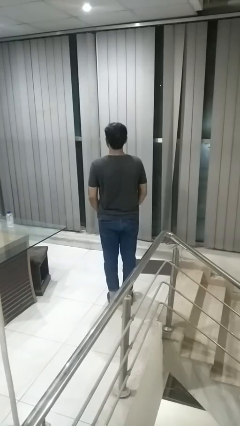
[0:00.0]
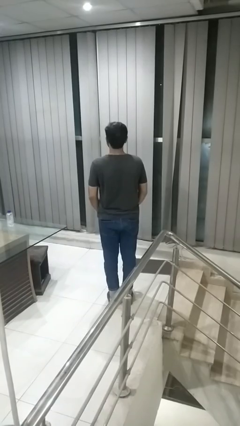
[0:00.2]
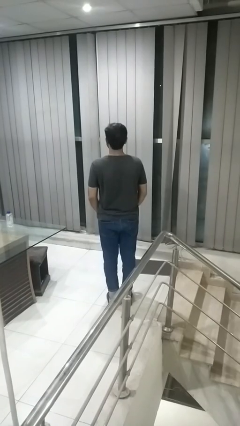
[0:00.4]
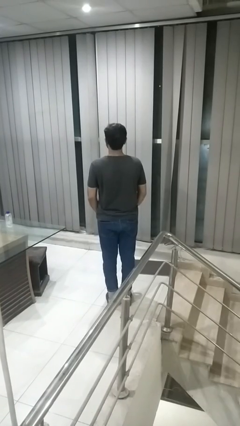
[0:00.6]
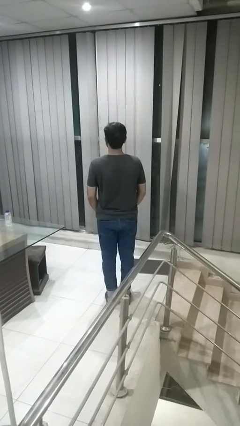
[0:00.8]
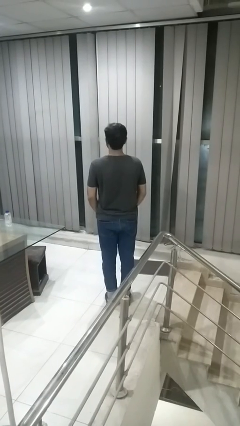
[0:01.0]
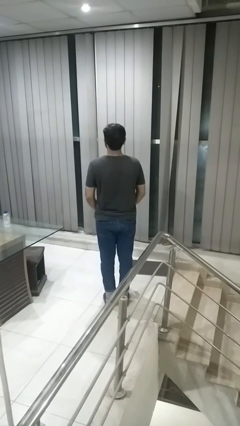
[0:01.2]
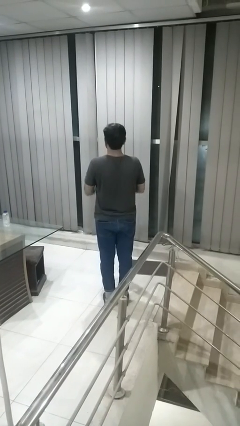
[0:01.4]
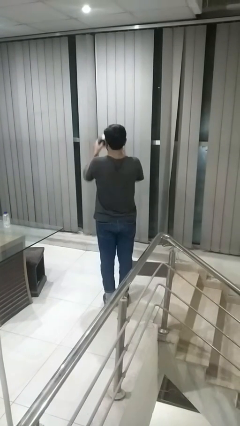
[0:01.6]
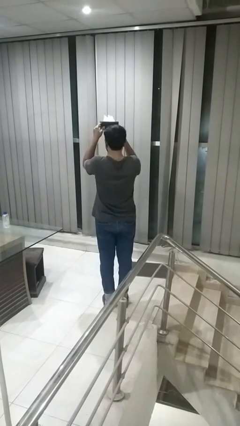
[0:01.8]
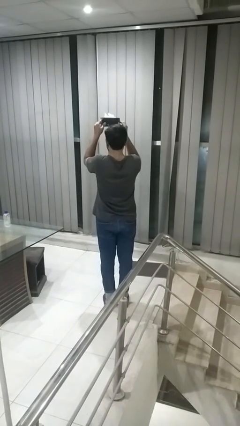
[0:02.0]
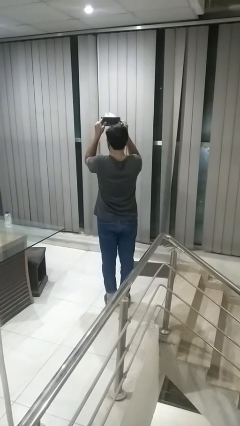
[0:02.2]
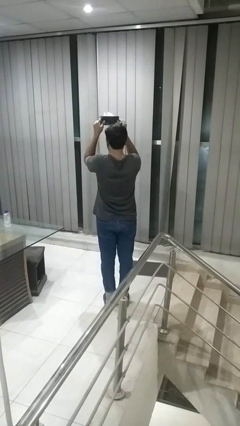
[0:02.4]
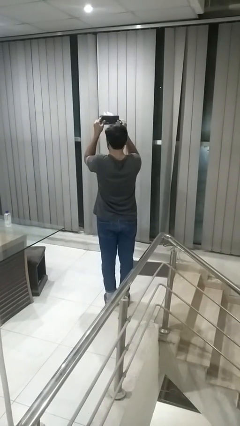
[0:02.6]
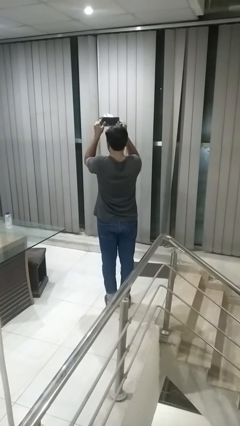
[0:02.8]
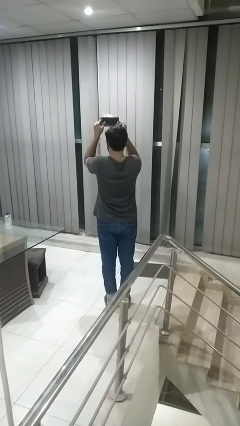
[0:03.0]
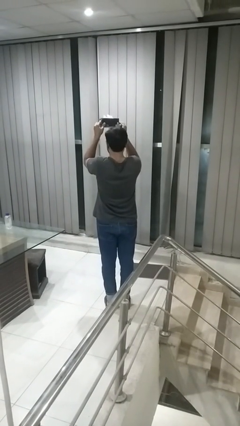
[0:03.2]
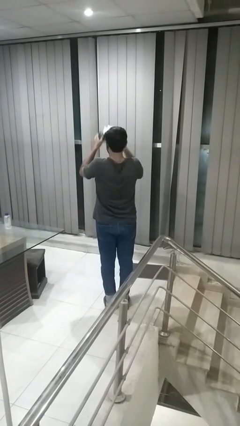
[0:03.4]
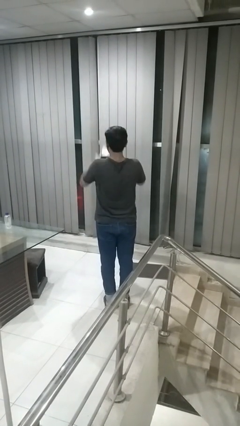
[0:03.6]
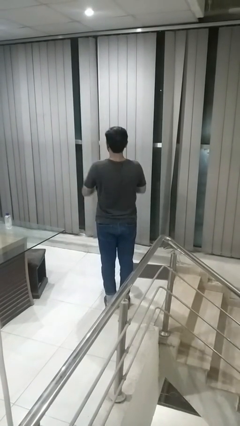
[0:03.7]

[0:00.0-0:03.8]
person holds object above head

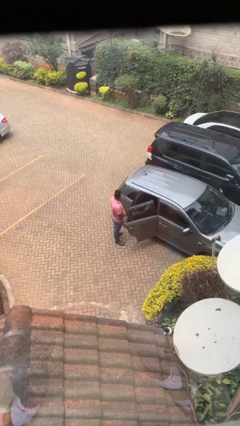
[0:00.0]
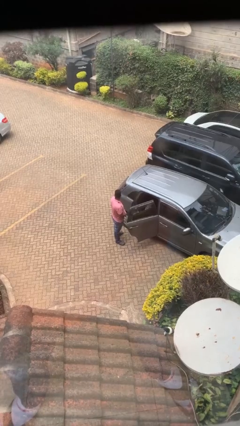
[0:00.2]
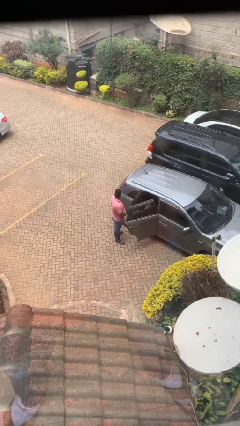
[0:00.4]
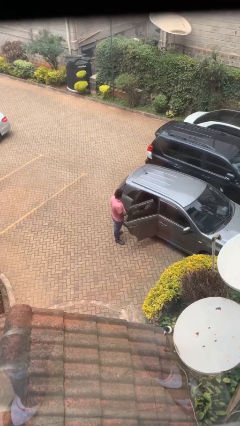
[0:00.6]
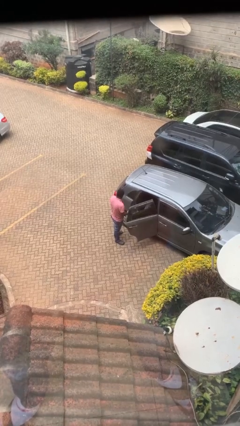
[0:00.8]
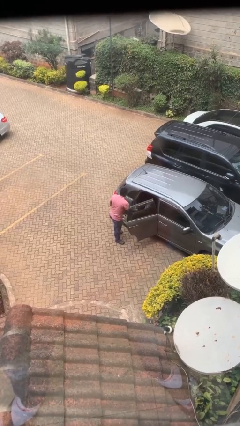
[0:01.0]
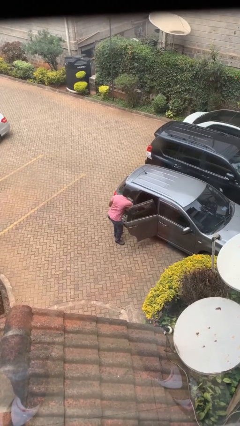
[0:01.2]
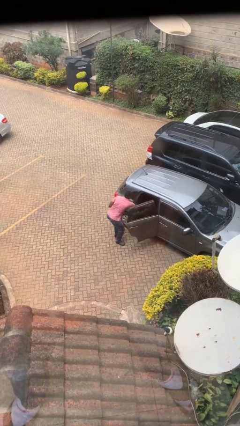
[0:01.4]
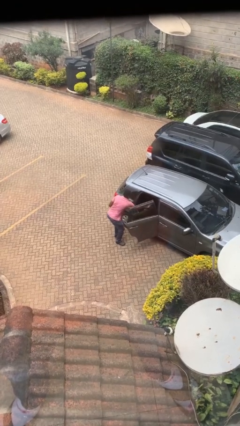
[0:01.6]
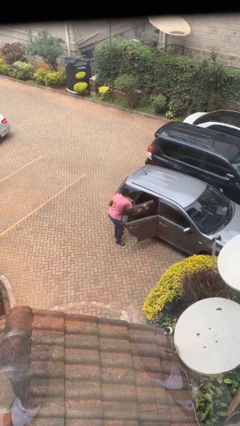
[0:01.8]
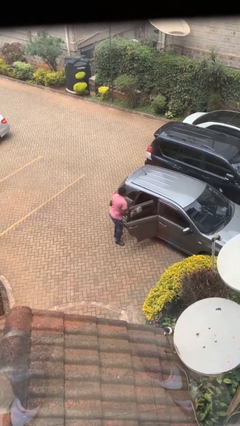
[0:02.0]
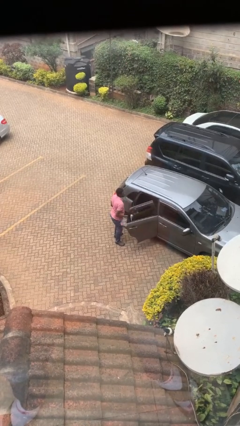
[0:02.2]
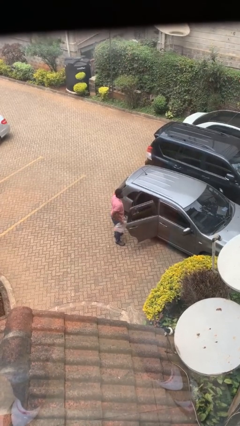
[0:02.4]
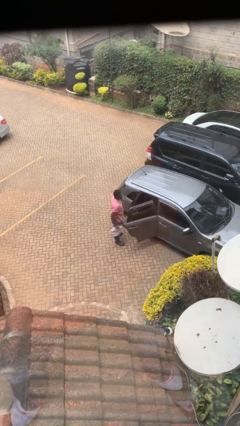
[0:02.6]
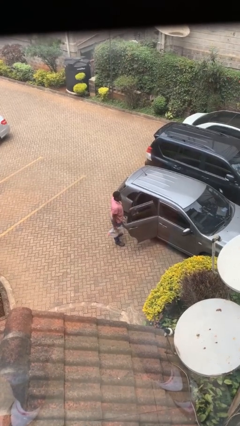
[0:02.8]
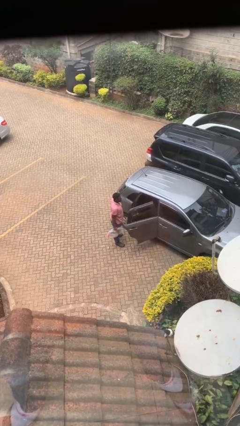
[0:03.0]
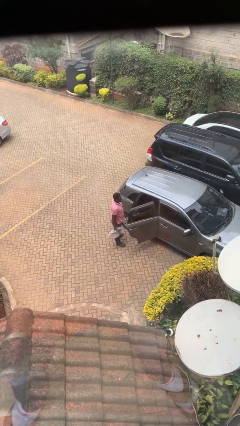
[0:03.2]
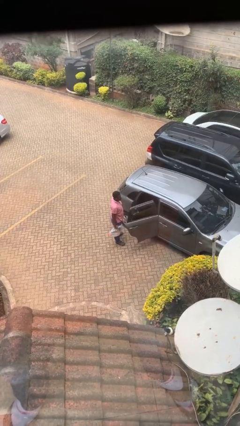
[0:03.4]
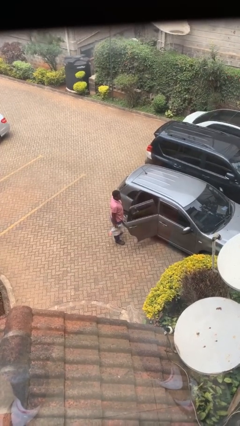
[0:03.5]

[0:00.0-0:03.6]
person unloads car

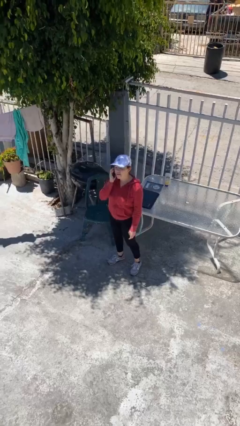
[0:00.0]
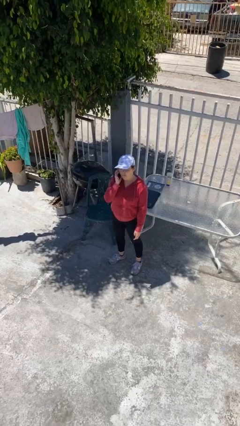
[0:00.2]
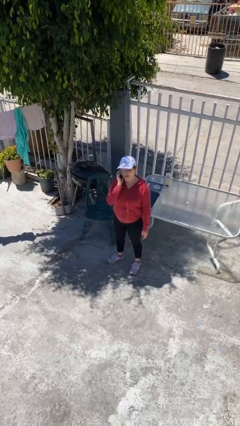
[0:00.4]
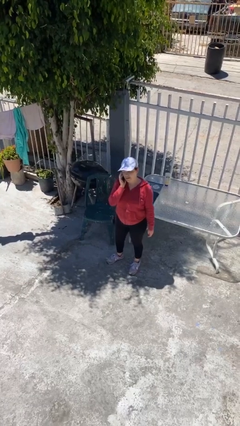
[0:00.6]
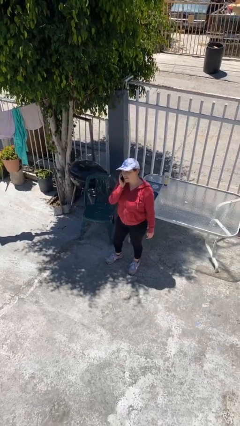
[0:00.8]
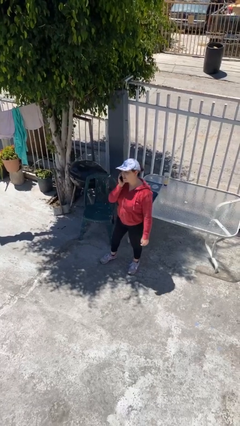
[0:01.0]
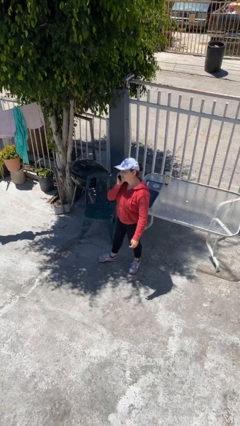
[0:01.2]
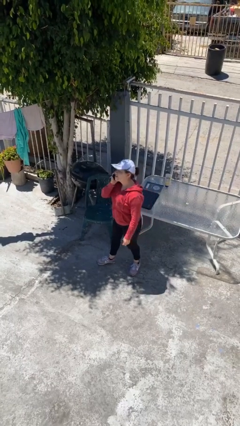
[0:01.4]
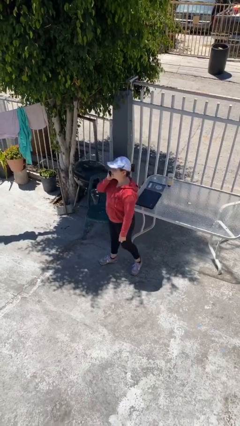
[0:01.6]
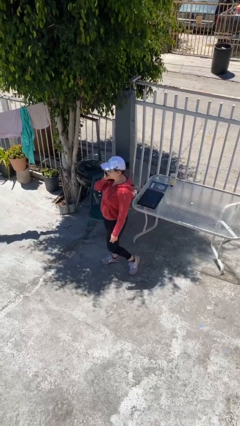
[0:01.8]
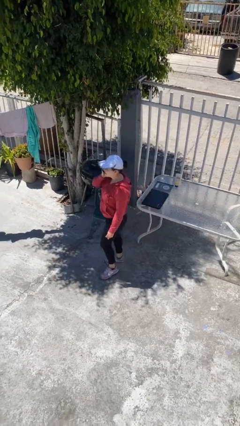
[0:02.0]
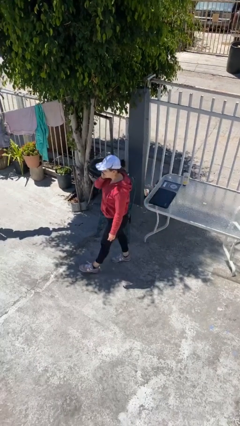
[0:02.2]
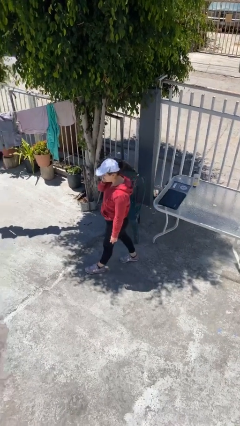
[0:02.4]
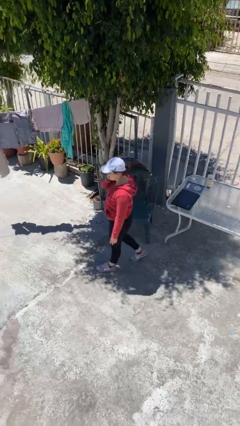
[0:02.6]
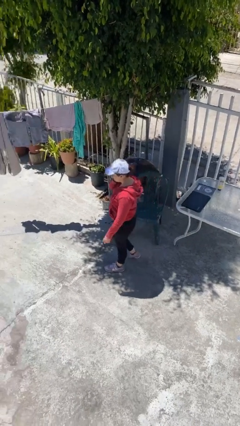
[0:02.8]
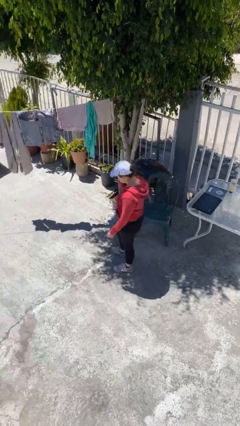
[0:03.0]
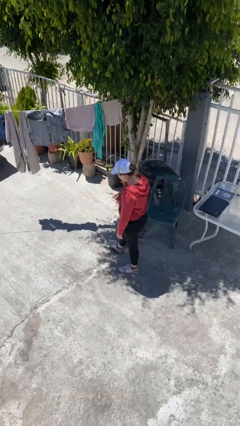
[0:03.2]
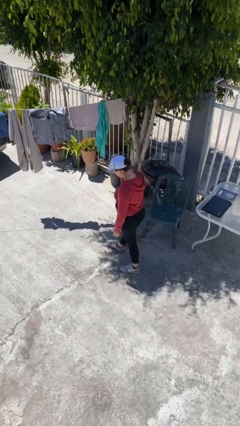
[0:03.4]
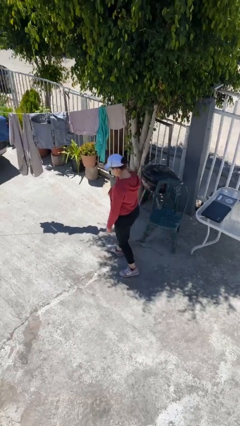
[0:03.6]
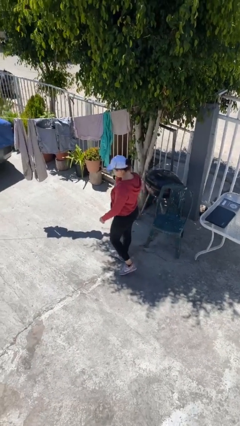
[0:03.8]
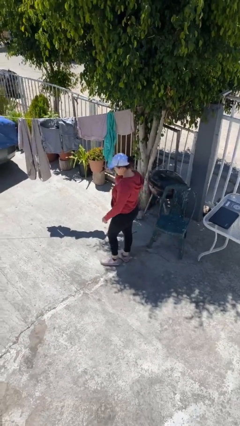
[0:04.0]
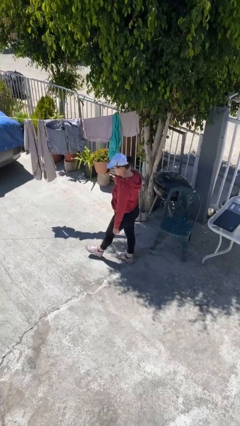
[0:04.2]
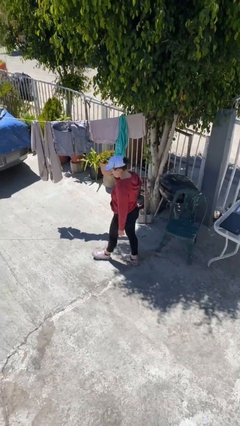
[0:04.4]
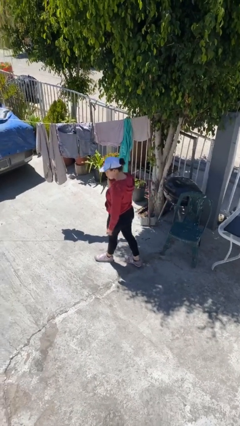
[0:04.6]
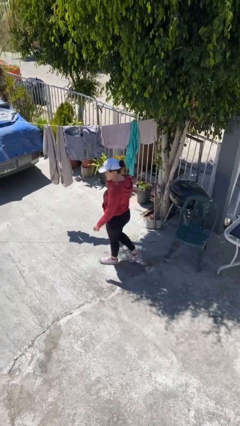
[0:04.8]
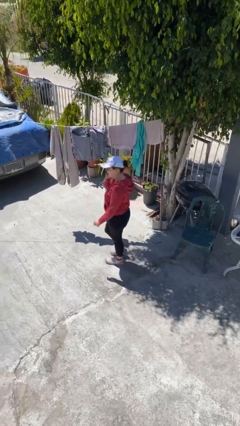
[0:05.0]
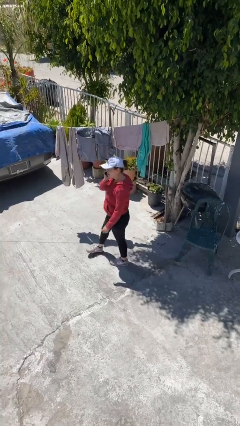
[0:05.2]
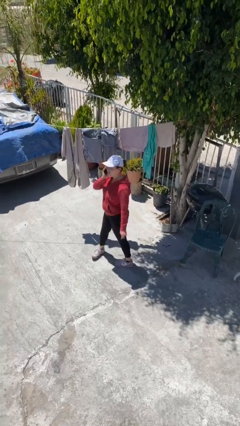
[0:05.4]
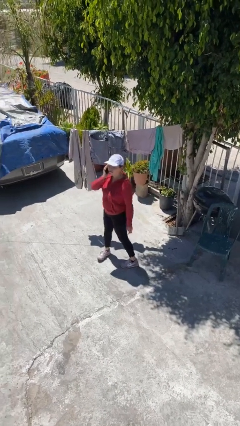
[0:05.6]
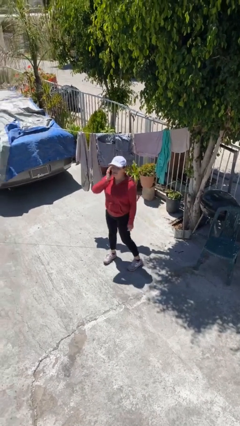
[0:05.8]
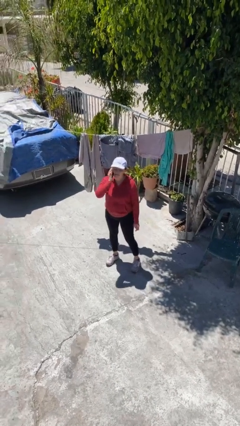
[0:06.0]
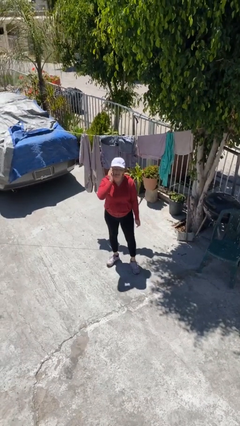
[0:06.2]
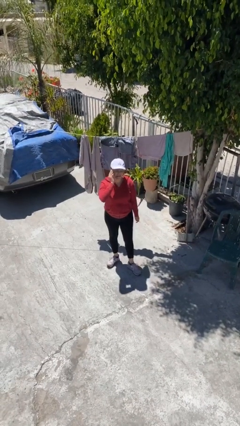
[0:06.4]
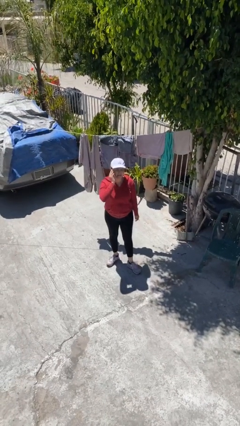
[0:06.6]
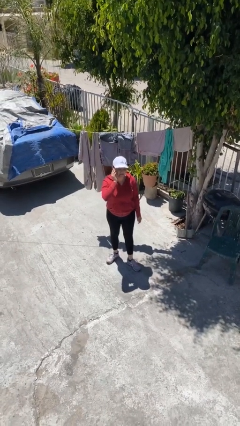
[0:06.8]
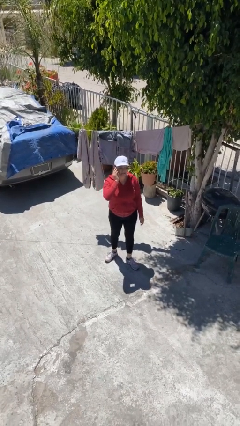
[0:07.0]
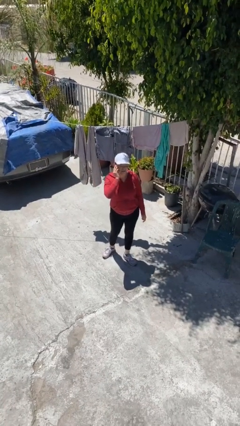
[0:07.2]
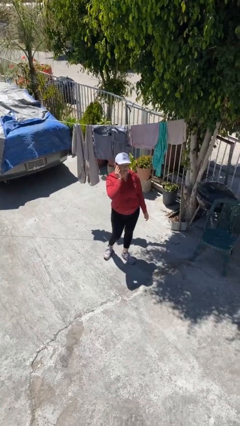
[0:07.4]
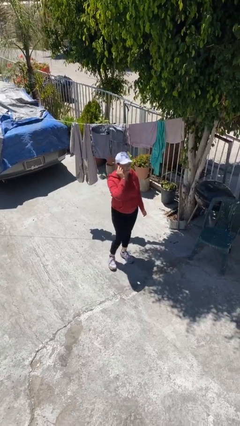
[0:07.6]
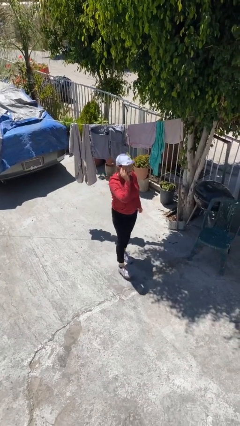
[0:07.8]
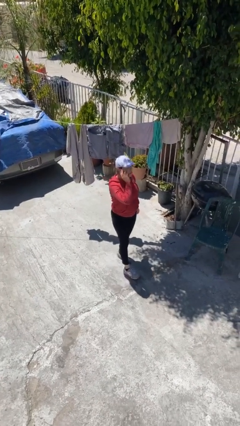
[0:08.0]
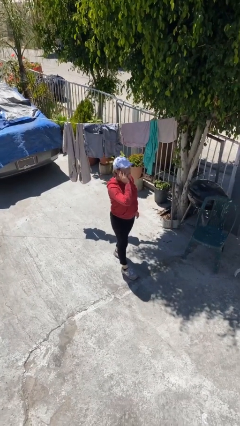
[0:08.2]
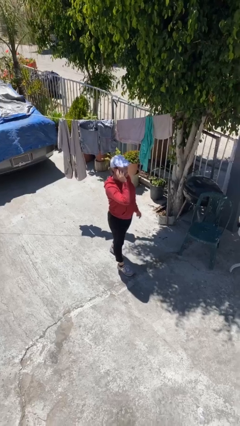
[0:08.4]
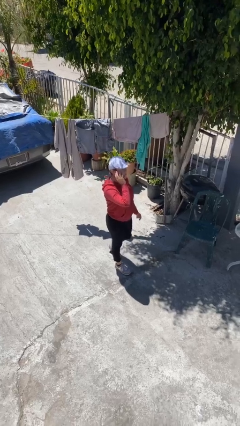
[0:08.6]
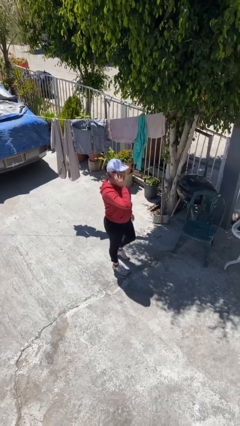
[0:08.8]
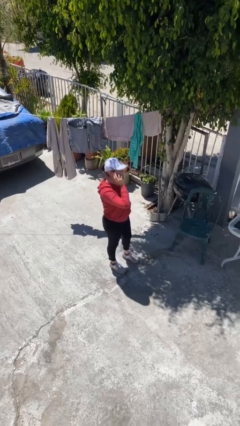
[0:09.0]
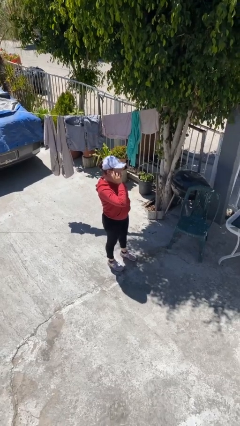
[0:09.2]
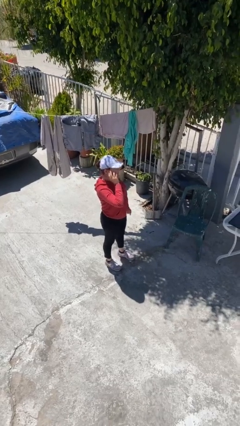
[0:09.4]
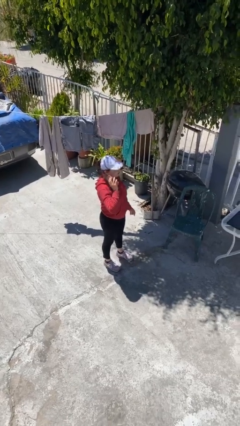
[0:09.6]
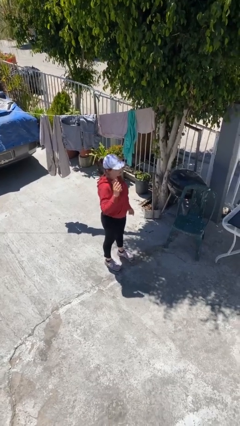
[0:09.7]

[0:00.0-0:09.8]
person talks on phone

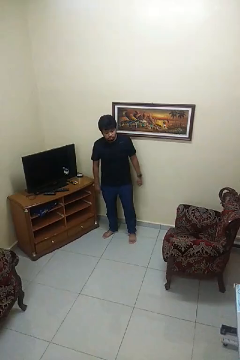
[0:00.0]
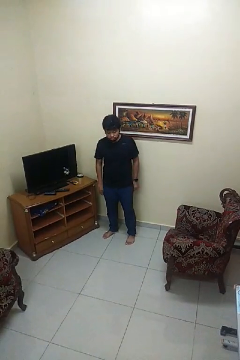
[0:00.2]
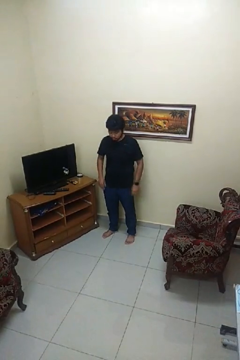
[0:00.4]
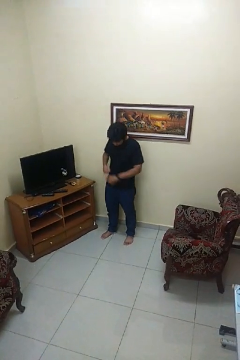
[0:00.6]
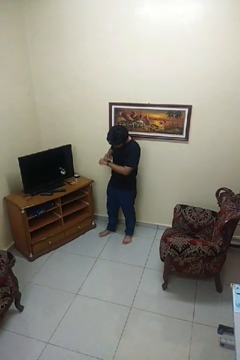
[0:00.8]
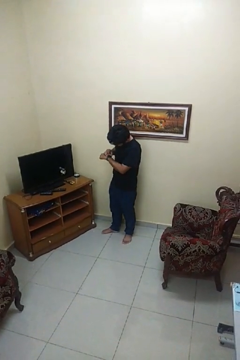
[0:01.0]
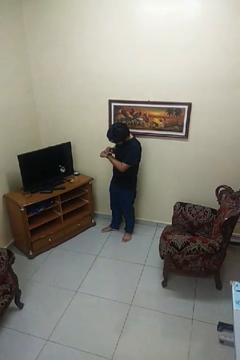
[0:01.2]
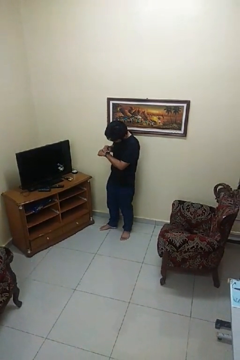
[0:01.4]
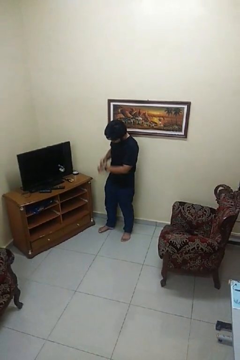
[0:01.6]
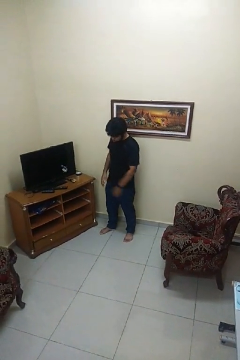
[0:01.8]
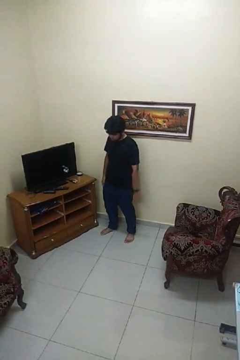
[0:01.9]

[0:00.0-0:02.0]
person looks at wristwatch
